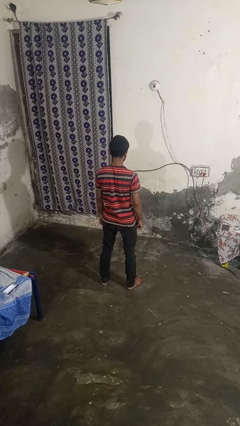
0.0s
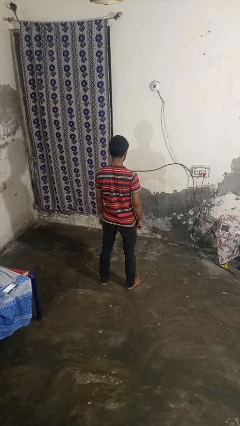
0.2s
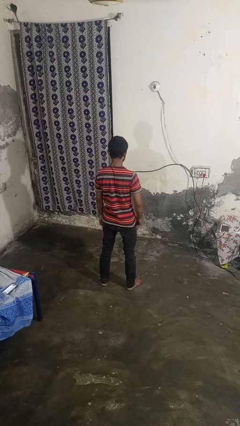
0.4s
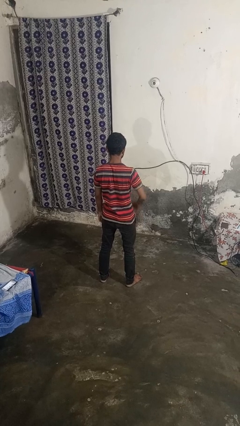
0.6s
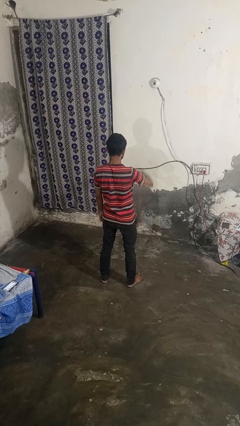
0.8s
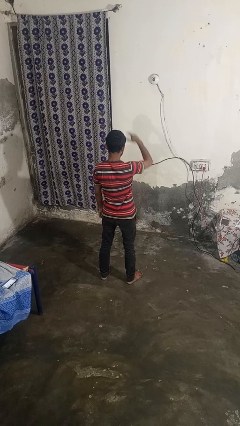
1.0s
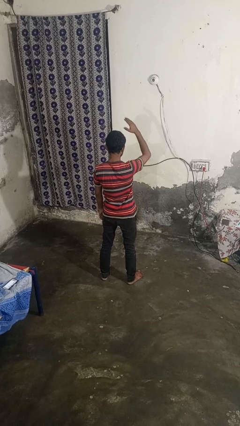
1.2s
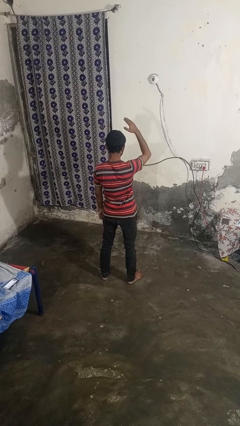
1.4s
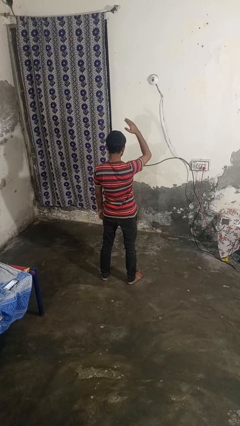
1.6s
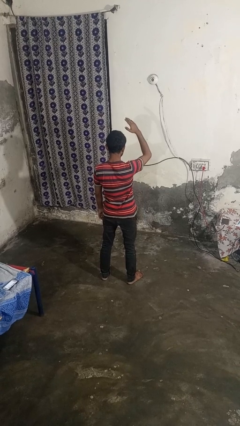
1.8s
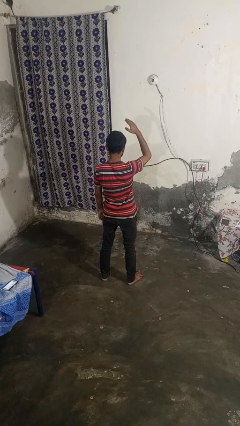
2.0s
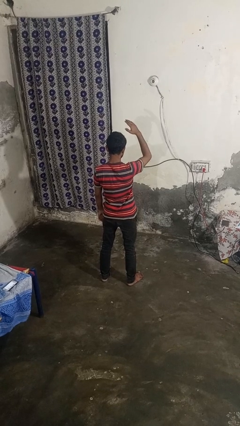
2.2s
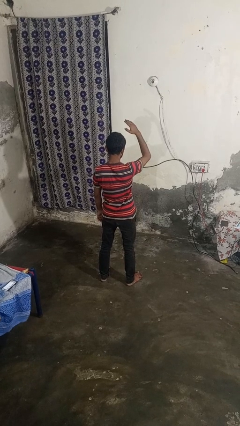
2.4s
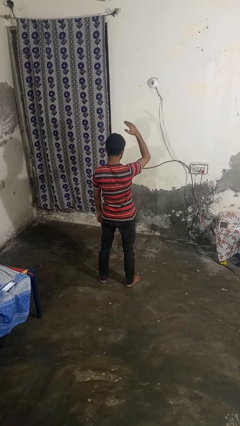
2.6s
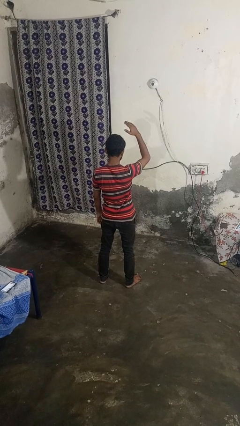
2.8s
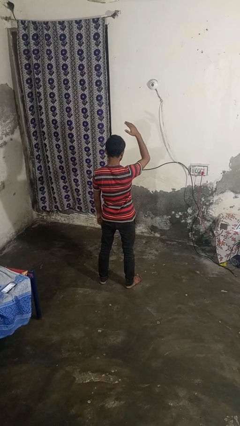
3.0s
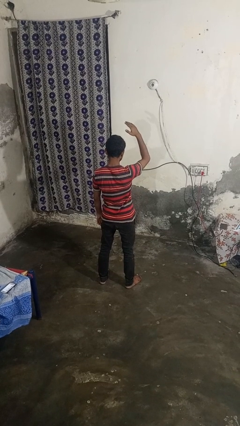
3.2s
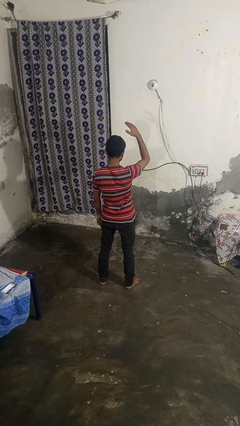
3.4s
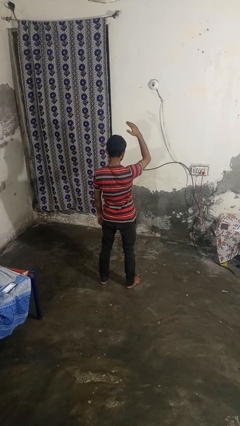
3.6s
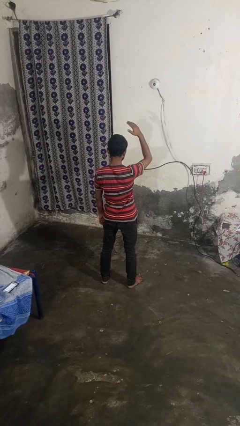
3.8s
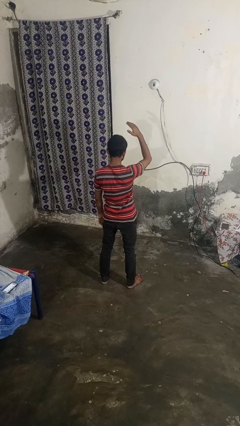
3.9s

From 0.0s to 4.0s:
person gestures swipe up

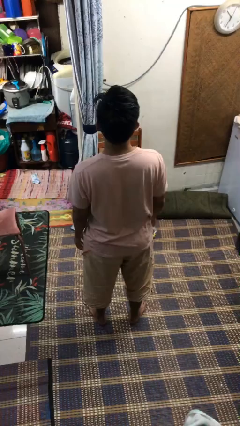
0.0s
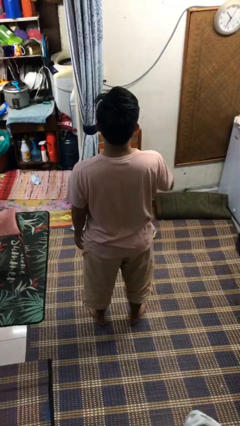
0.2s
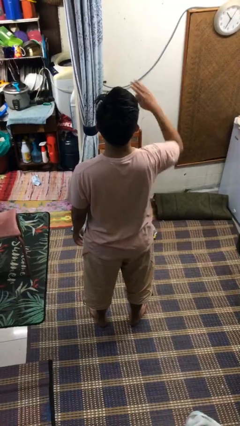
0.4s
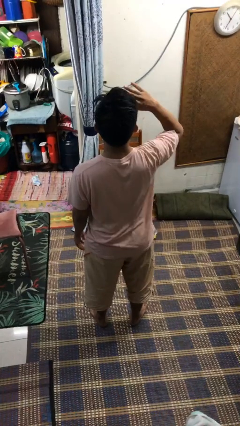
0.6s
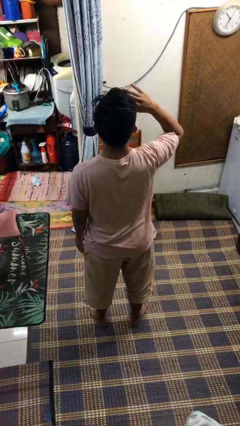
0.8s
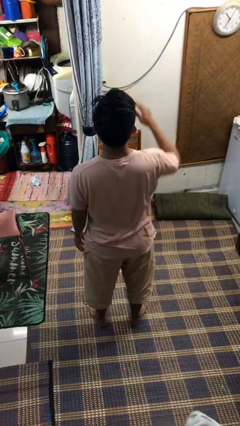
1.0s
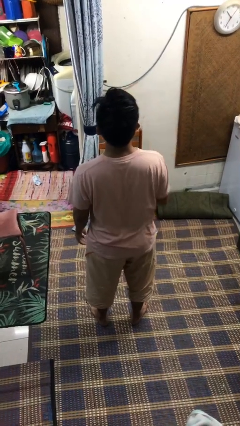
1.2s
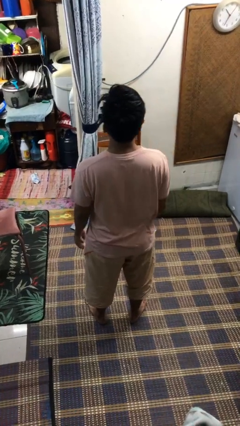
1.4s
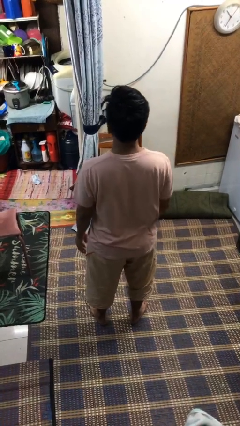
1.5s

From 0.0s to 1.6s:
person salutes

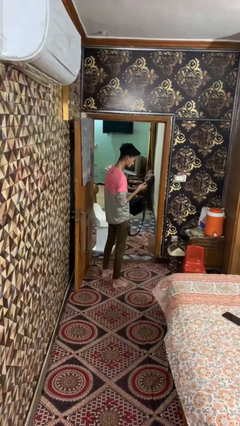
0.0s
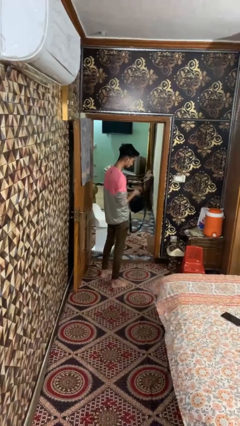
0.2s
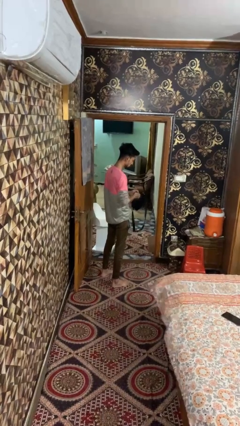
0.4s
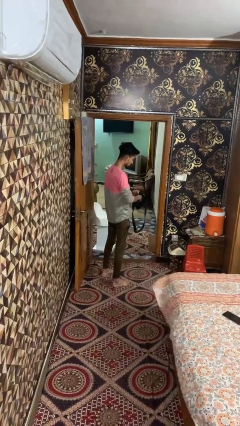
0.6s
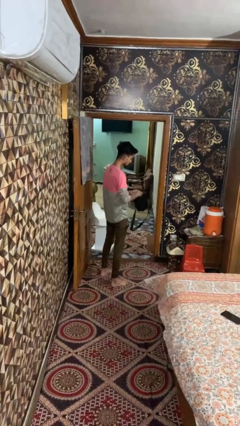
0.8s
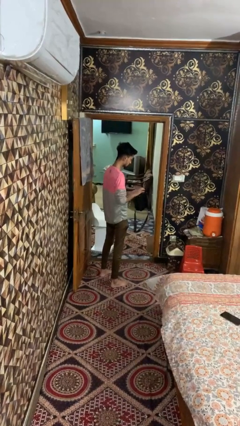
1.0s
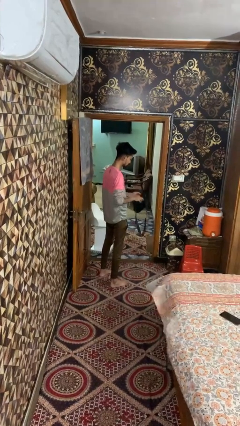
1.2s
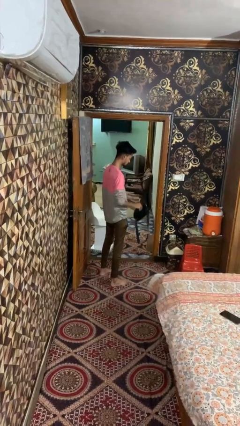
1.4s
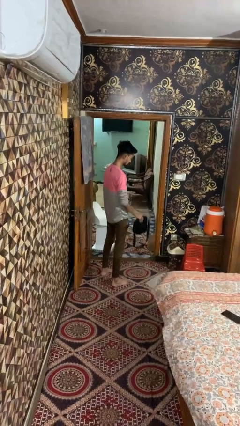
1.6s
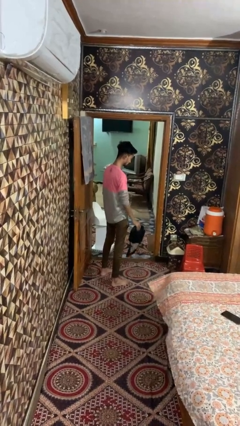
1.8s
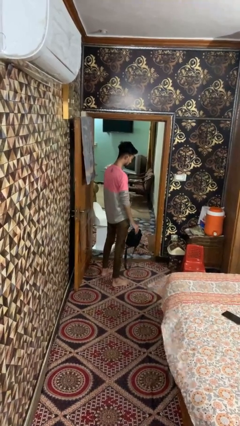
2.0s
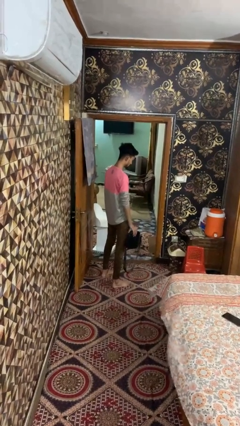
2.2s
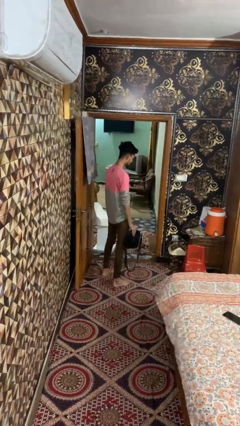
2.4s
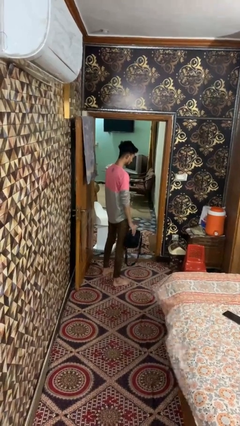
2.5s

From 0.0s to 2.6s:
person puts object into bag

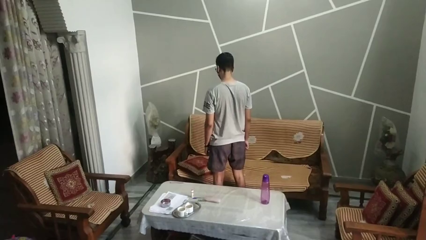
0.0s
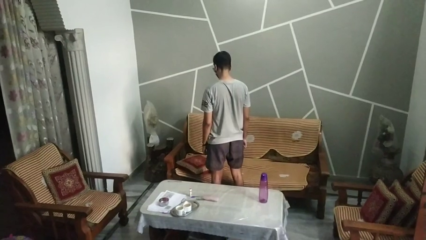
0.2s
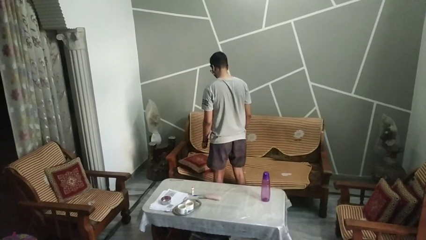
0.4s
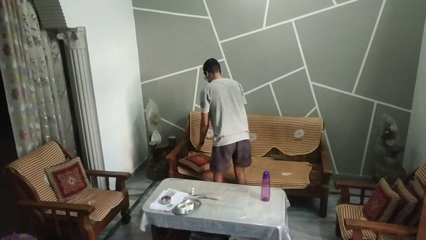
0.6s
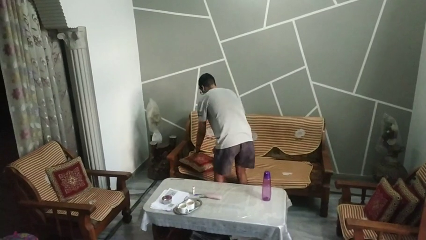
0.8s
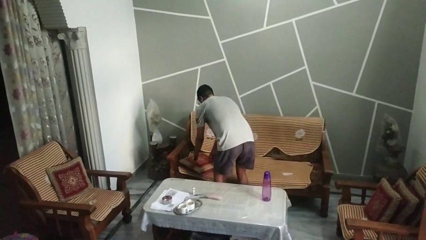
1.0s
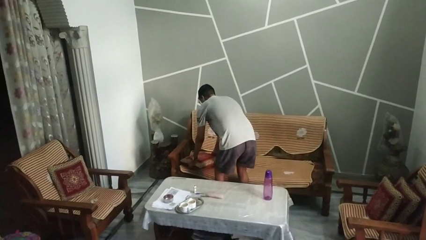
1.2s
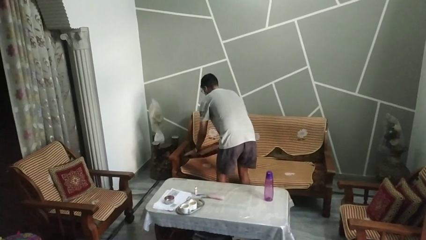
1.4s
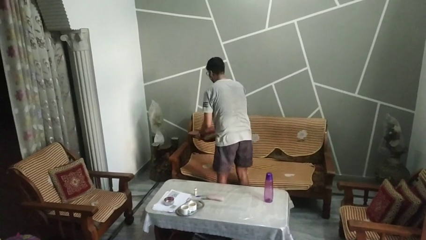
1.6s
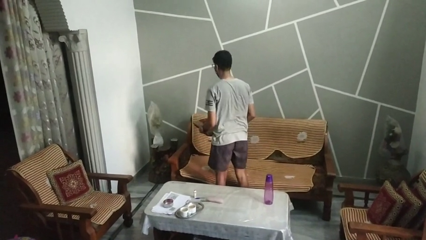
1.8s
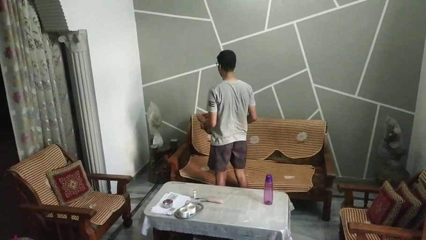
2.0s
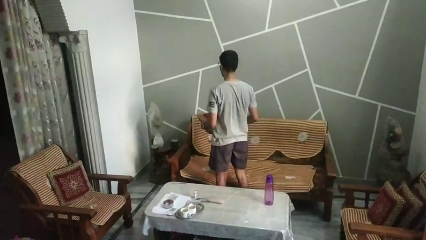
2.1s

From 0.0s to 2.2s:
person picks up object from couch

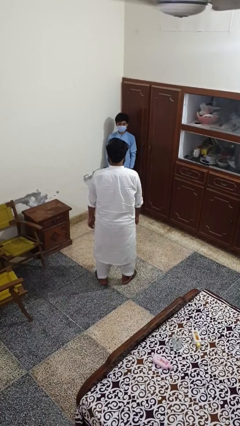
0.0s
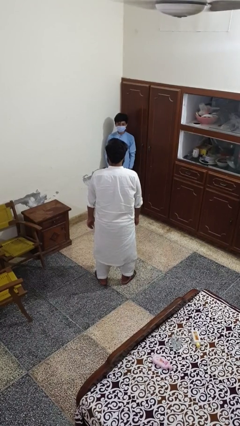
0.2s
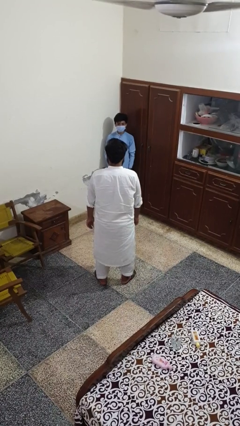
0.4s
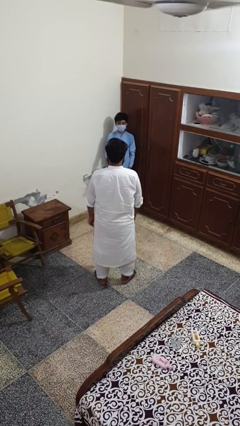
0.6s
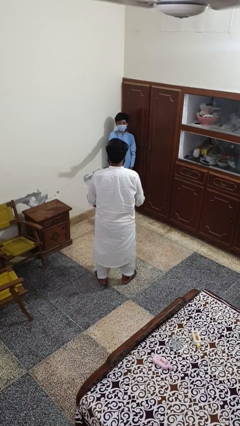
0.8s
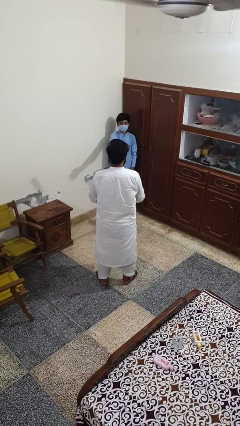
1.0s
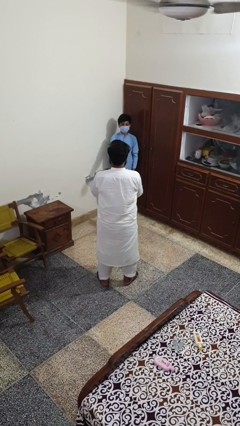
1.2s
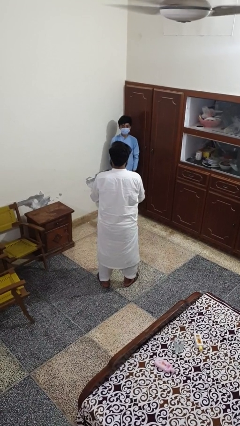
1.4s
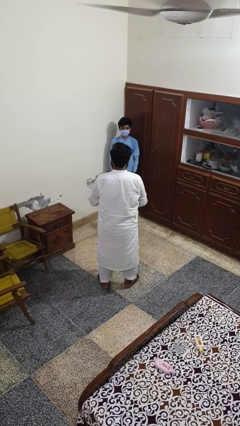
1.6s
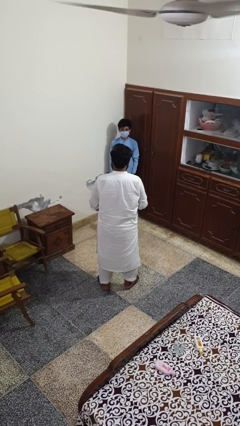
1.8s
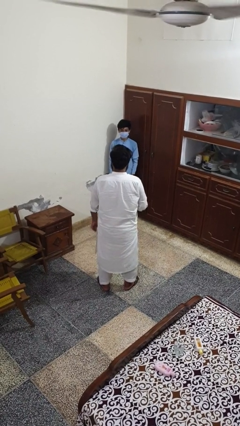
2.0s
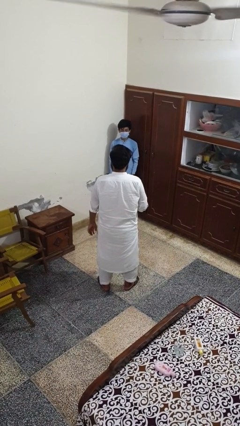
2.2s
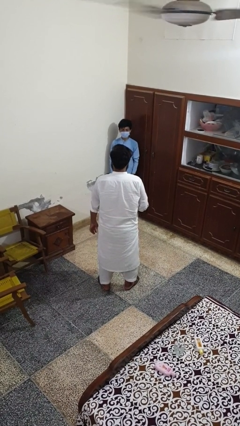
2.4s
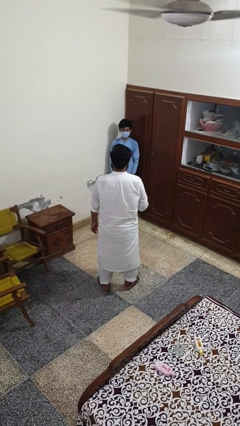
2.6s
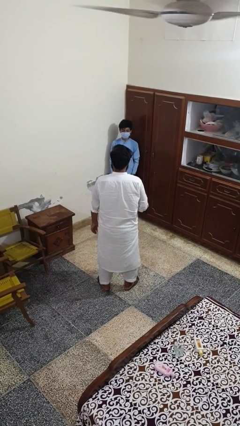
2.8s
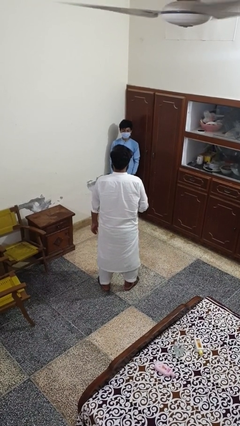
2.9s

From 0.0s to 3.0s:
person catches object from person

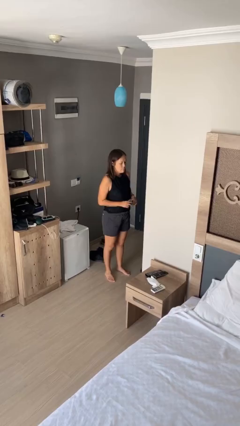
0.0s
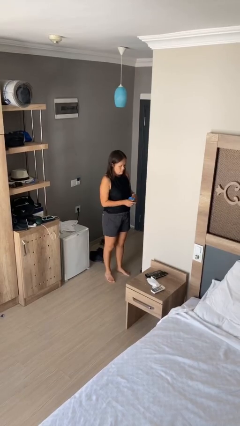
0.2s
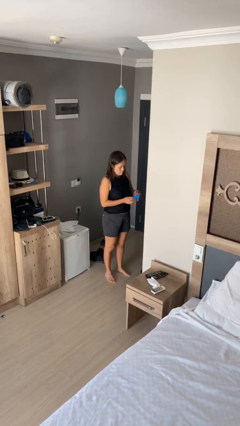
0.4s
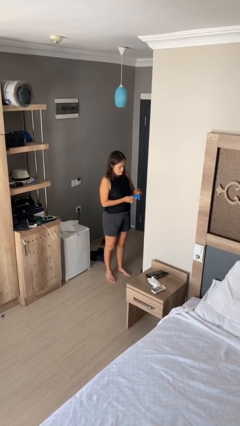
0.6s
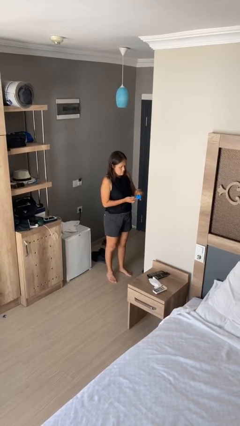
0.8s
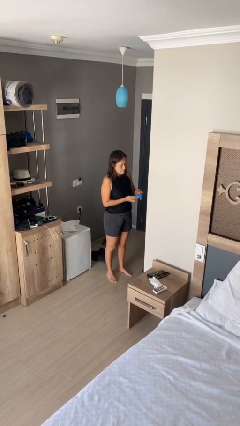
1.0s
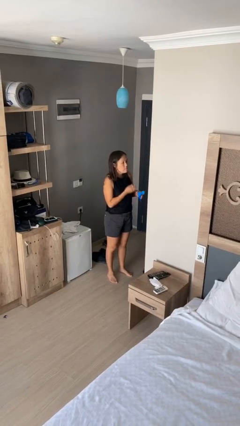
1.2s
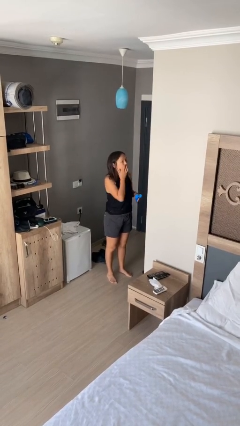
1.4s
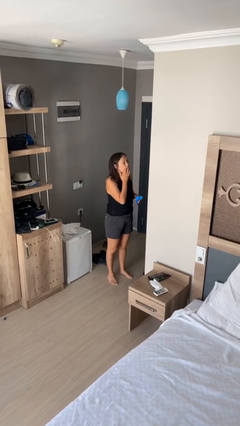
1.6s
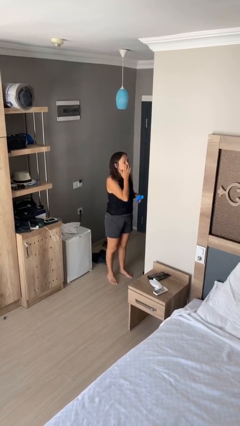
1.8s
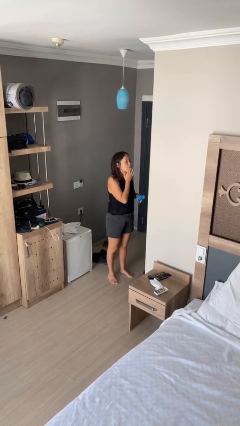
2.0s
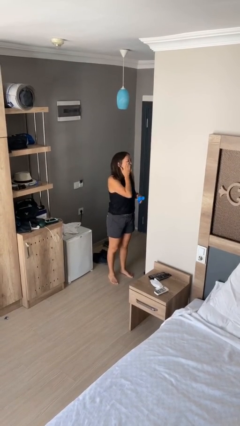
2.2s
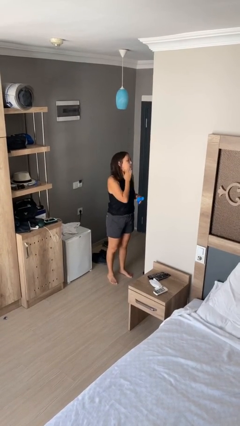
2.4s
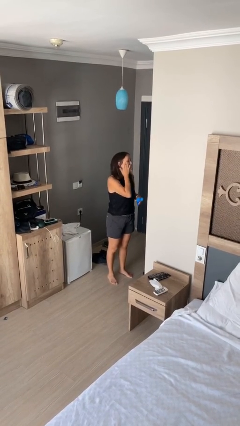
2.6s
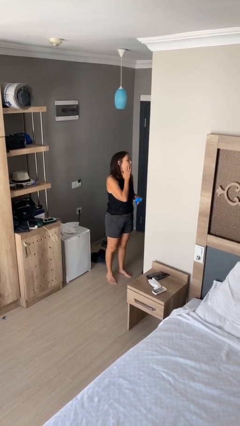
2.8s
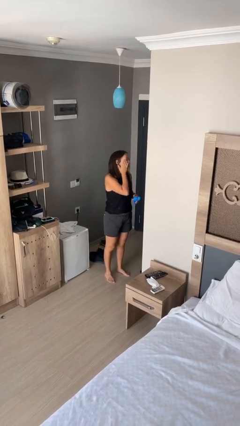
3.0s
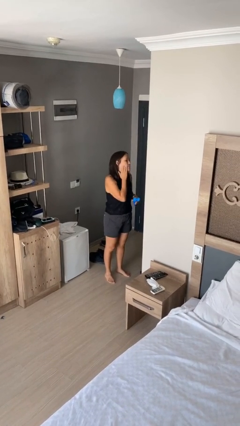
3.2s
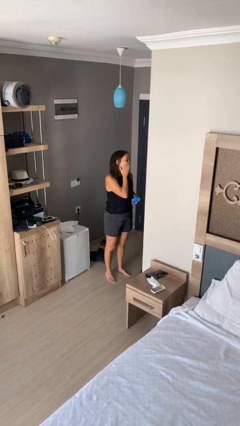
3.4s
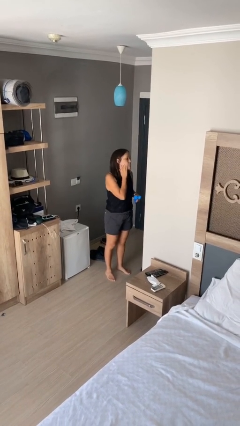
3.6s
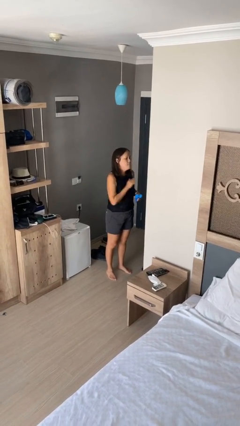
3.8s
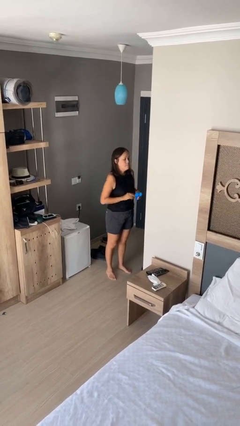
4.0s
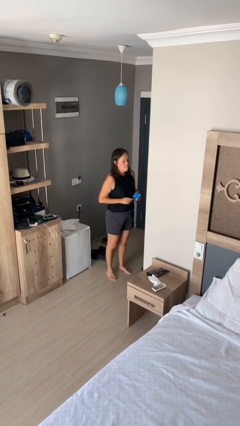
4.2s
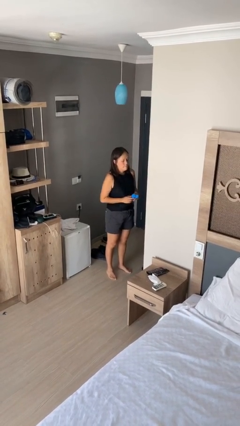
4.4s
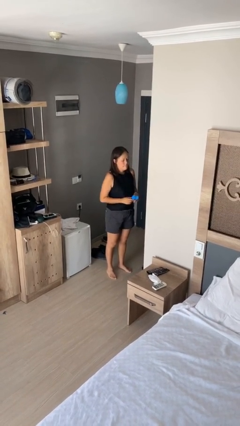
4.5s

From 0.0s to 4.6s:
person applies facial moisturizer
